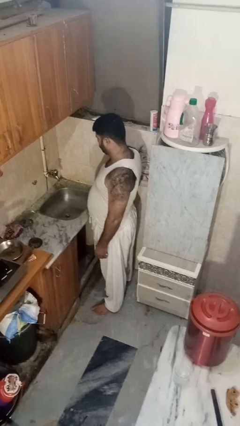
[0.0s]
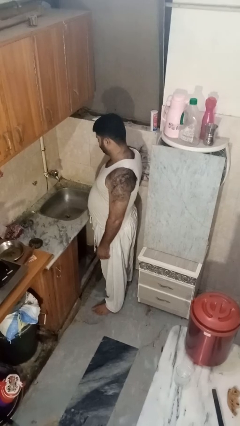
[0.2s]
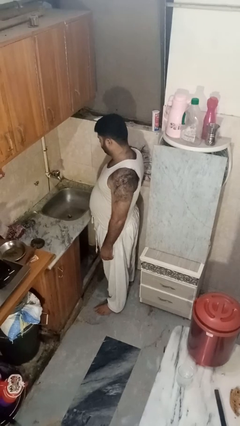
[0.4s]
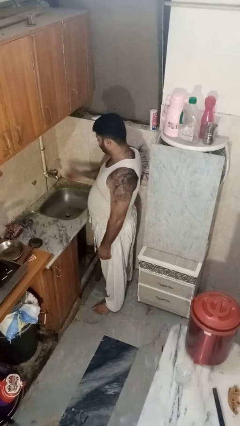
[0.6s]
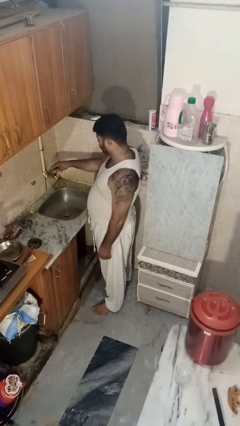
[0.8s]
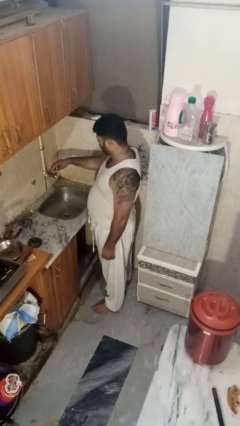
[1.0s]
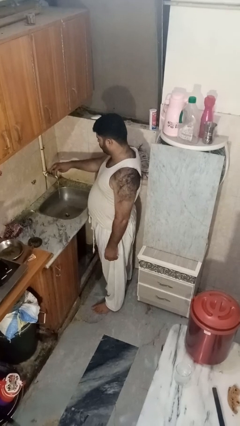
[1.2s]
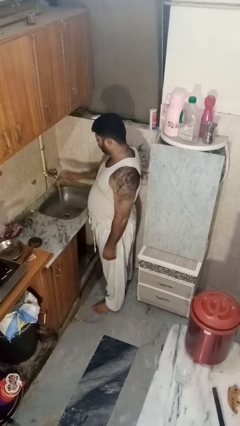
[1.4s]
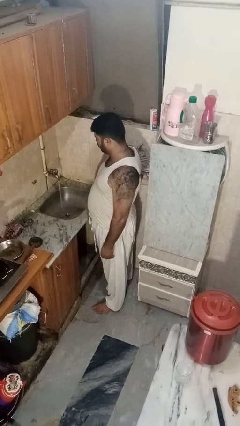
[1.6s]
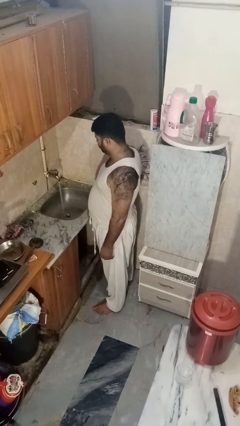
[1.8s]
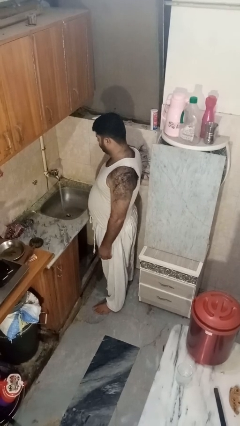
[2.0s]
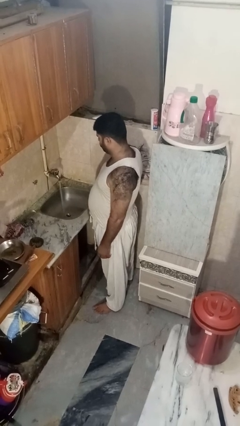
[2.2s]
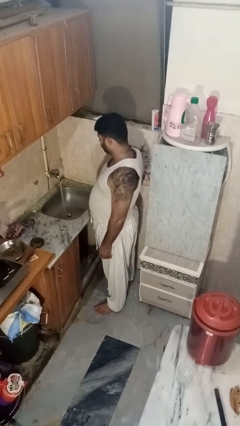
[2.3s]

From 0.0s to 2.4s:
person turns on faucet

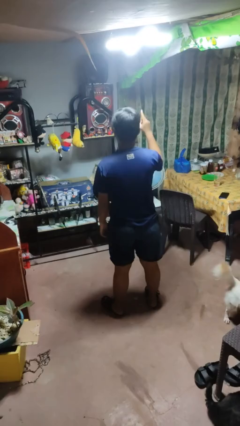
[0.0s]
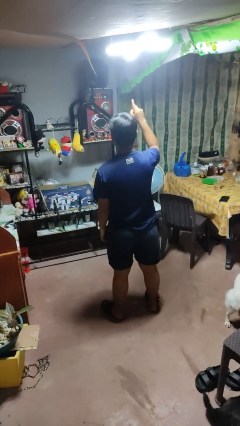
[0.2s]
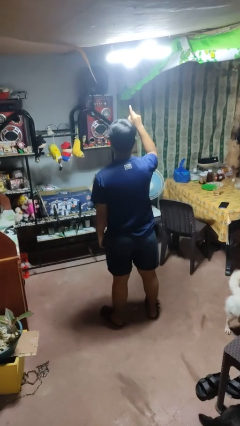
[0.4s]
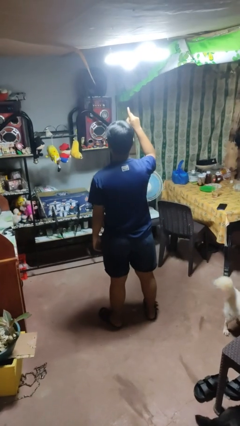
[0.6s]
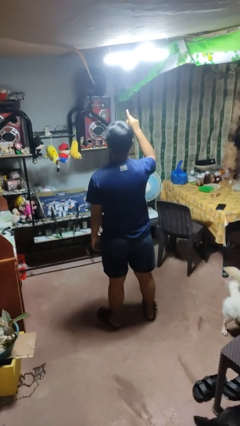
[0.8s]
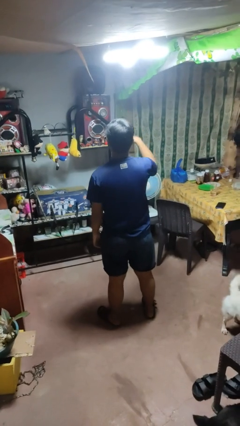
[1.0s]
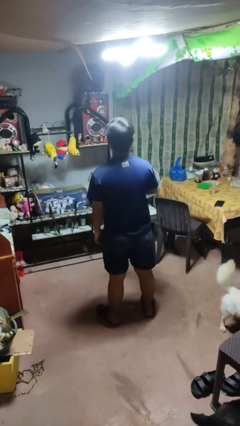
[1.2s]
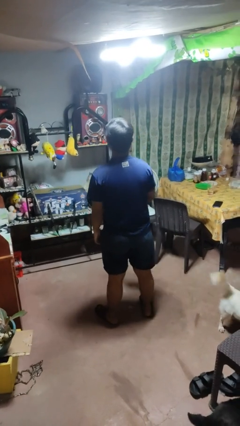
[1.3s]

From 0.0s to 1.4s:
person gestures number one

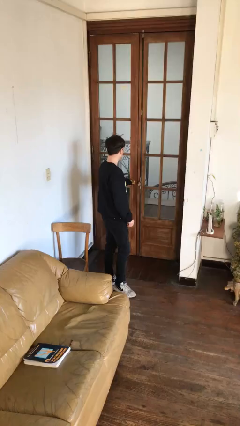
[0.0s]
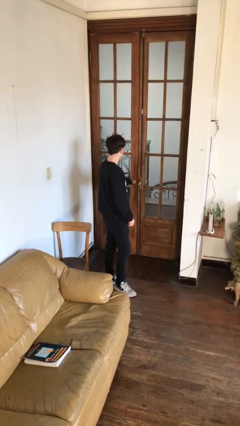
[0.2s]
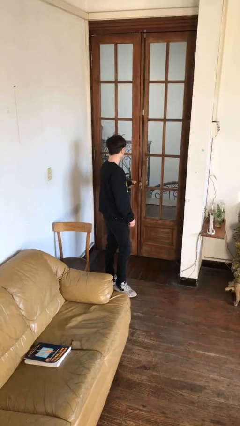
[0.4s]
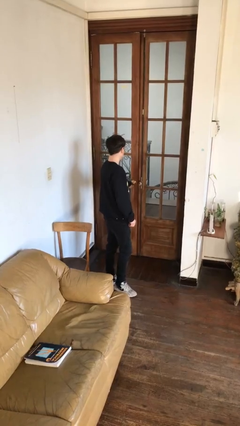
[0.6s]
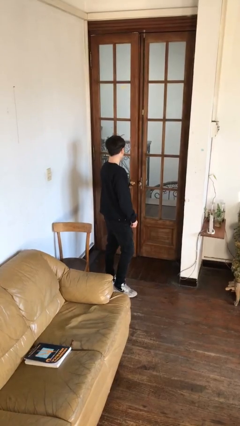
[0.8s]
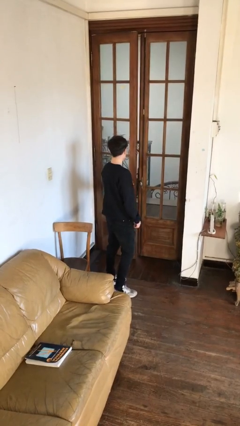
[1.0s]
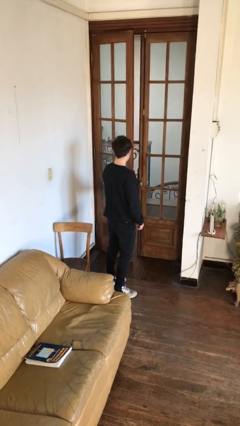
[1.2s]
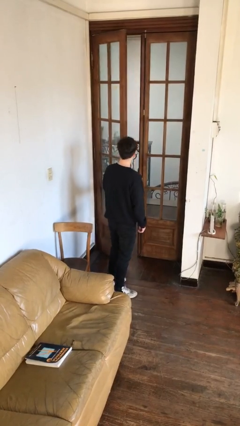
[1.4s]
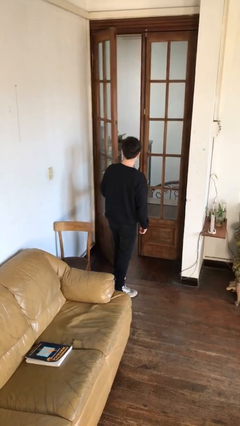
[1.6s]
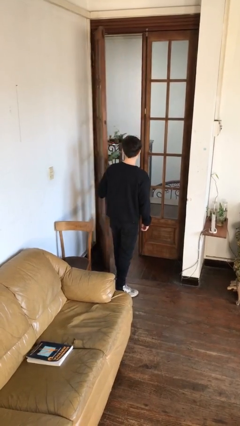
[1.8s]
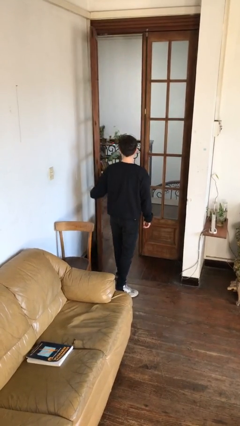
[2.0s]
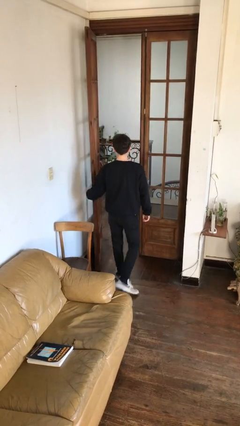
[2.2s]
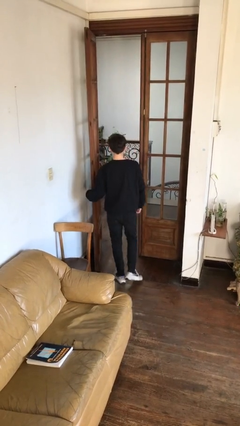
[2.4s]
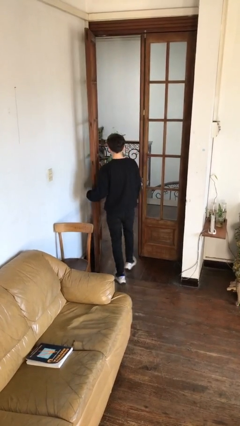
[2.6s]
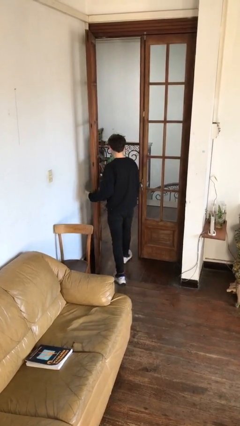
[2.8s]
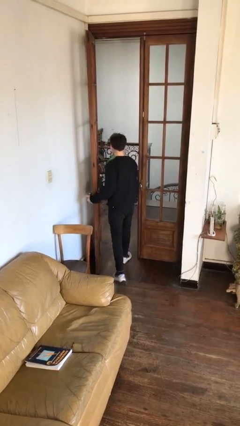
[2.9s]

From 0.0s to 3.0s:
person opens facility door

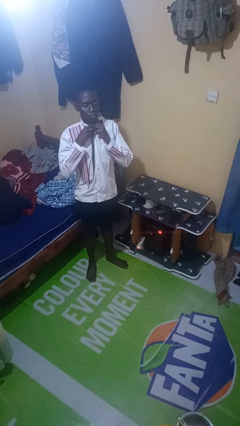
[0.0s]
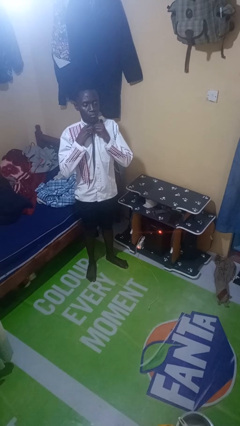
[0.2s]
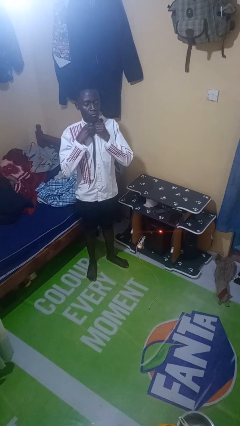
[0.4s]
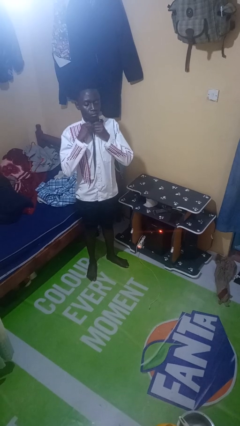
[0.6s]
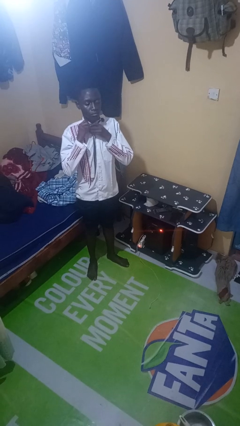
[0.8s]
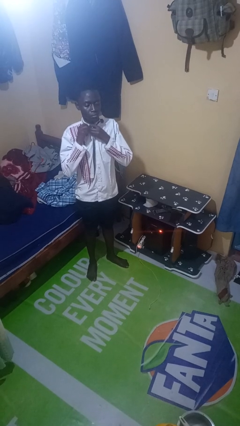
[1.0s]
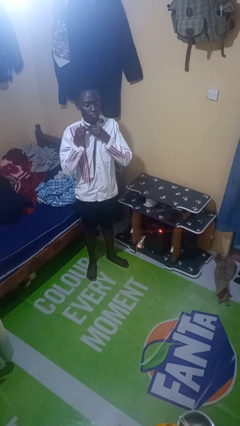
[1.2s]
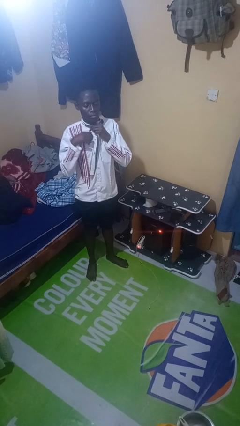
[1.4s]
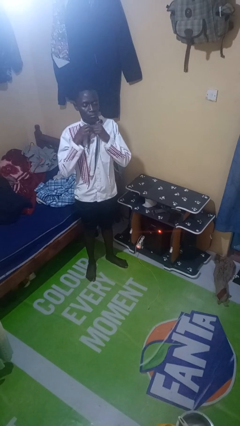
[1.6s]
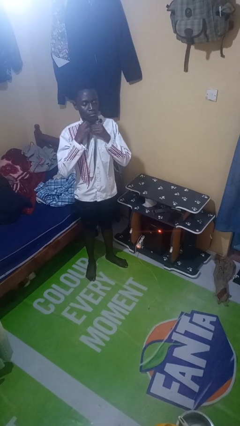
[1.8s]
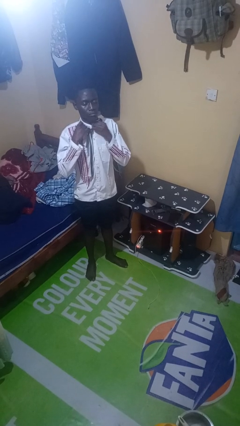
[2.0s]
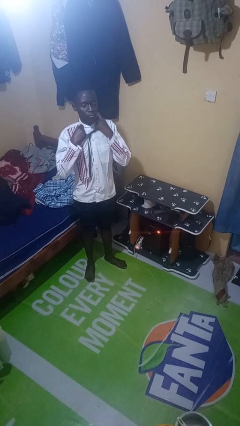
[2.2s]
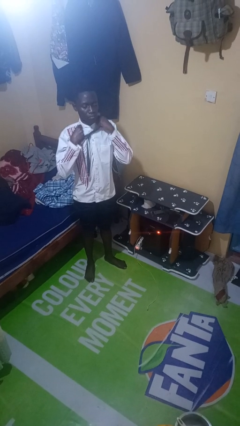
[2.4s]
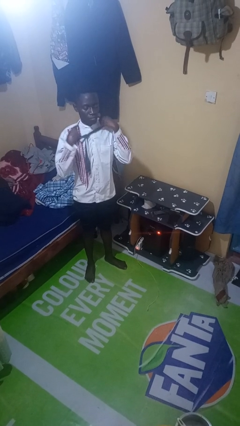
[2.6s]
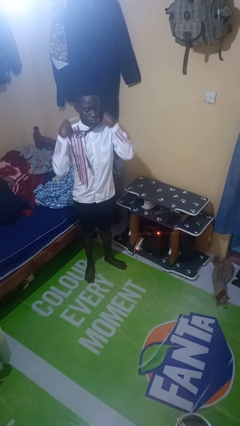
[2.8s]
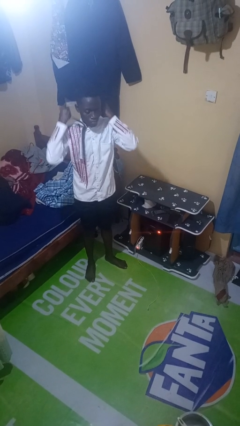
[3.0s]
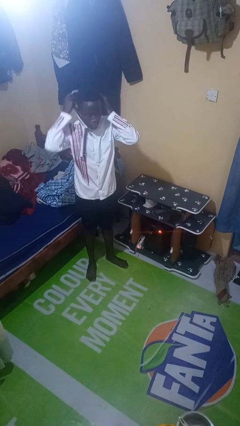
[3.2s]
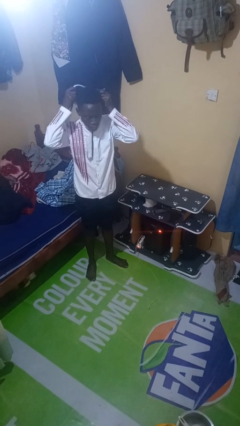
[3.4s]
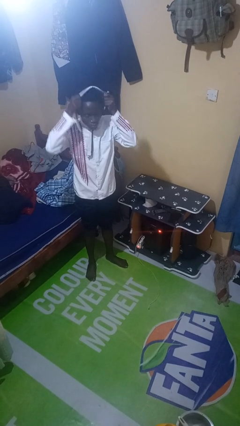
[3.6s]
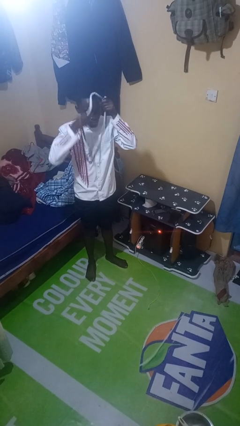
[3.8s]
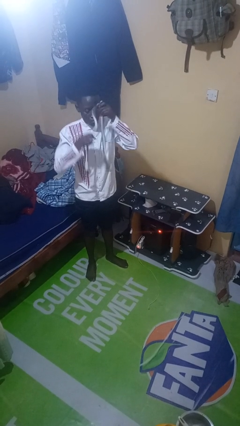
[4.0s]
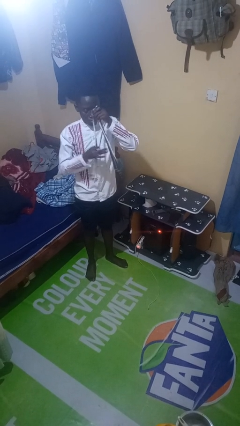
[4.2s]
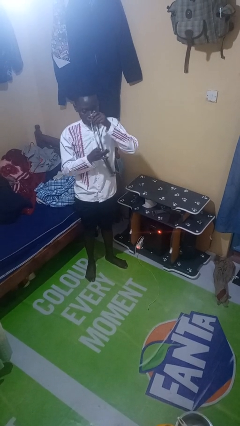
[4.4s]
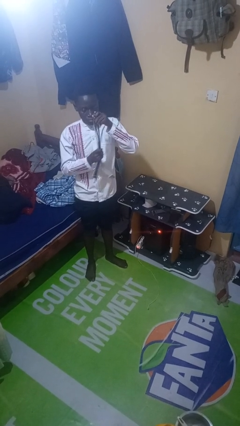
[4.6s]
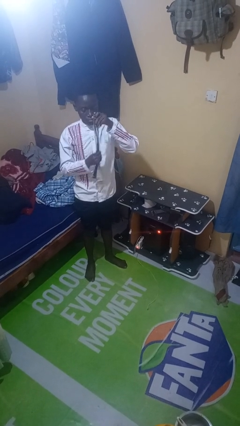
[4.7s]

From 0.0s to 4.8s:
person takes off necktie

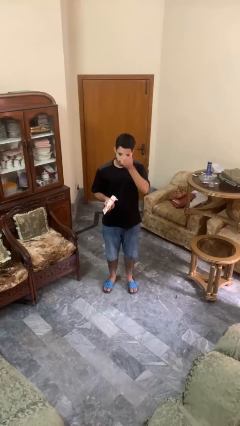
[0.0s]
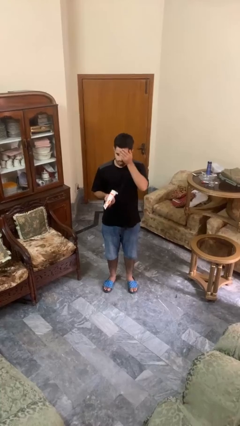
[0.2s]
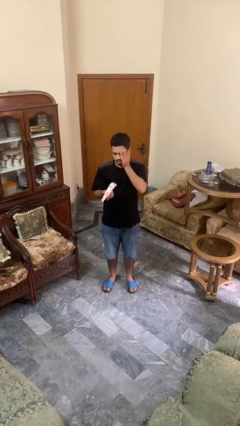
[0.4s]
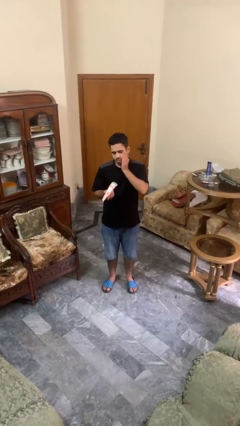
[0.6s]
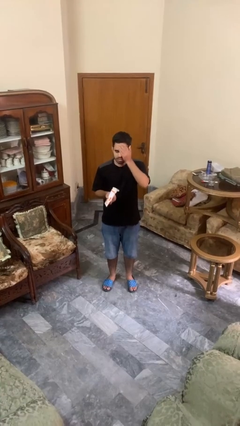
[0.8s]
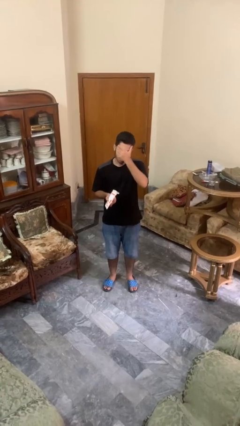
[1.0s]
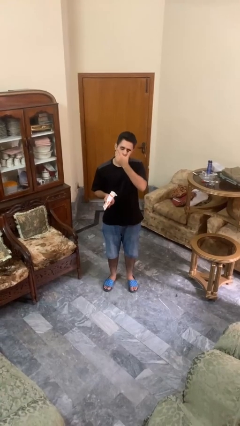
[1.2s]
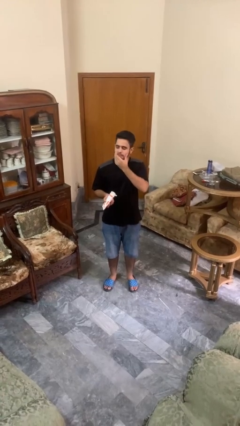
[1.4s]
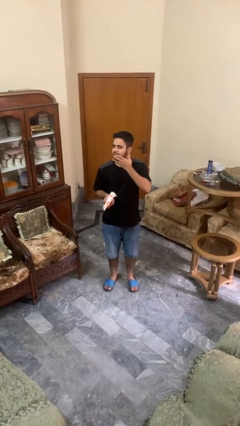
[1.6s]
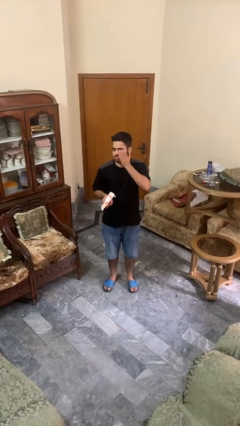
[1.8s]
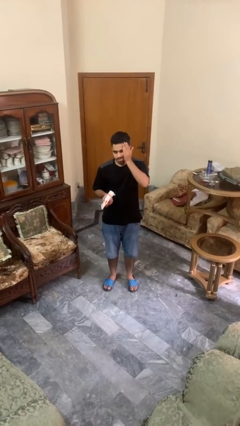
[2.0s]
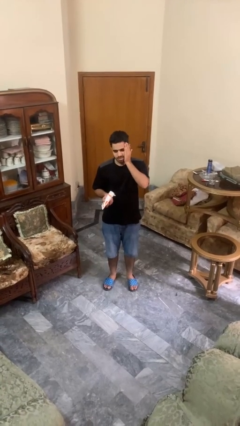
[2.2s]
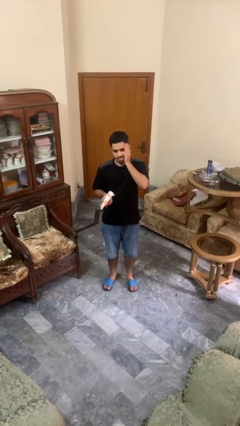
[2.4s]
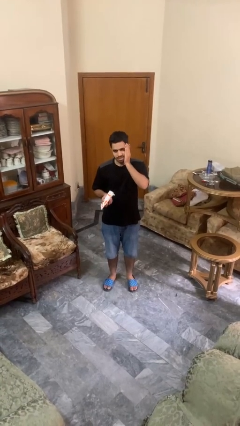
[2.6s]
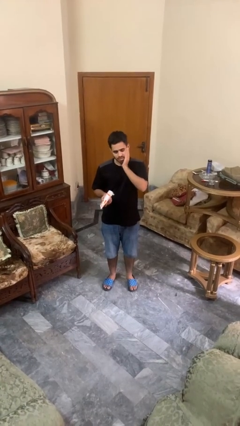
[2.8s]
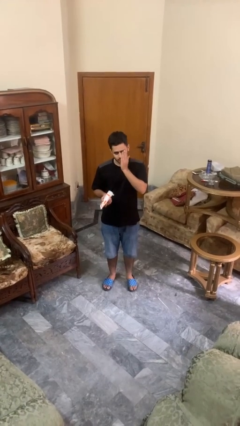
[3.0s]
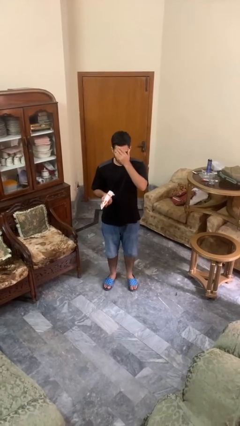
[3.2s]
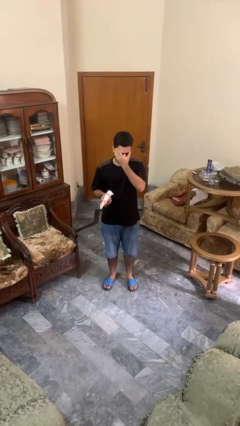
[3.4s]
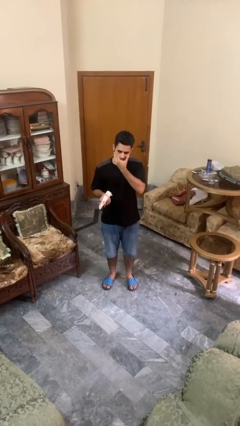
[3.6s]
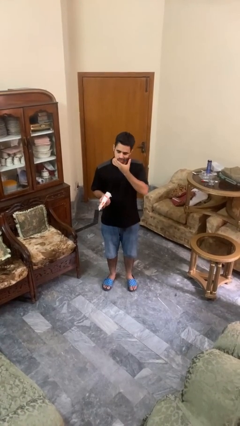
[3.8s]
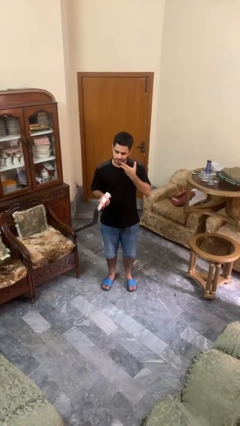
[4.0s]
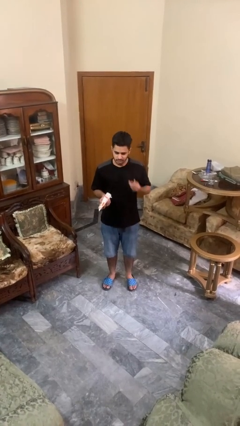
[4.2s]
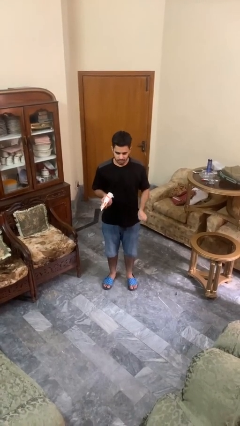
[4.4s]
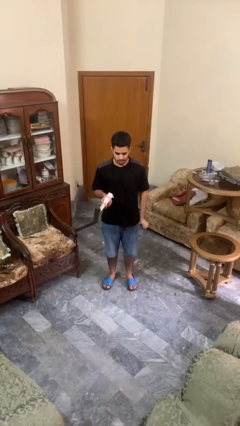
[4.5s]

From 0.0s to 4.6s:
person applies sunscreen

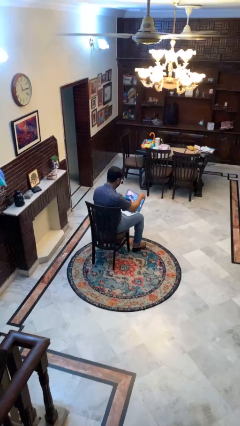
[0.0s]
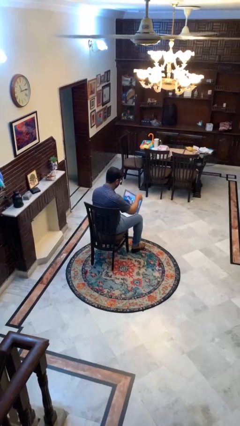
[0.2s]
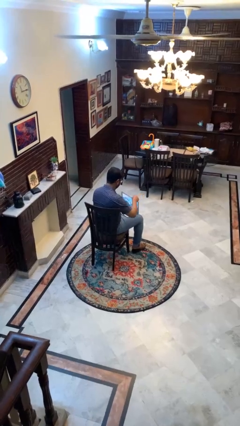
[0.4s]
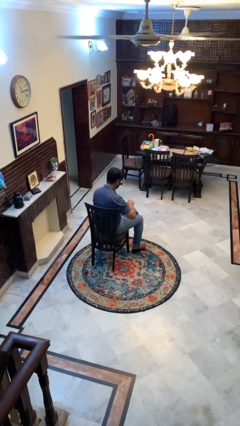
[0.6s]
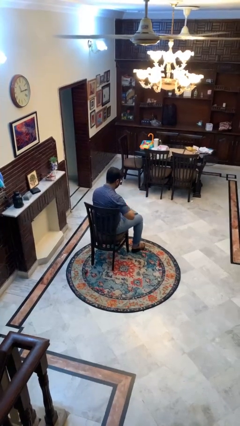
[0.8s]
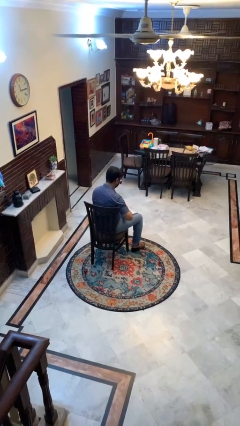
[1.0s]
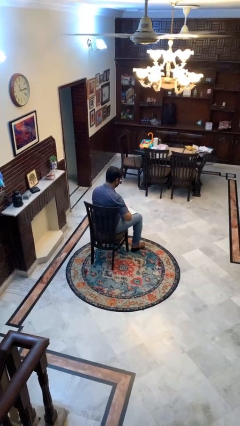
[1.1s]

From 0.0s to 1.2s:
person closes laptop
